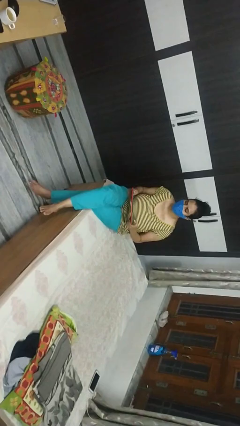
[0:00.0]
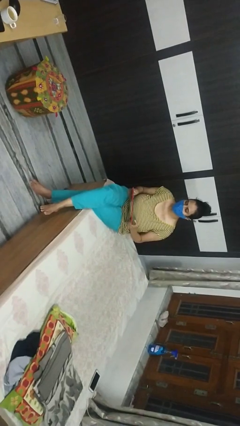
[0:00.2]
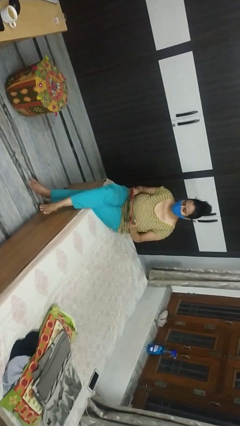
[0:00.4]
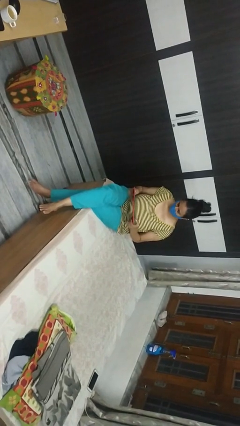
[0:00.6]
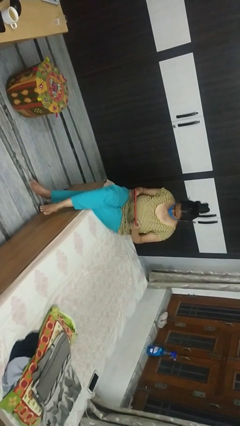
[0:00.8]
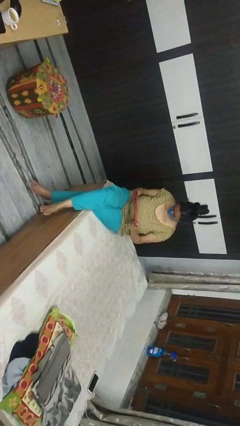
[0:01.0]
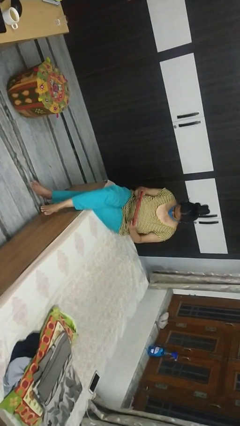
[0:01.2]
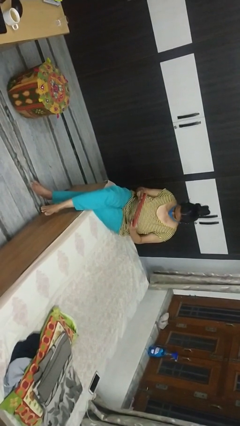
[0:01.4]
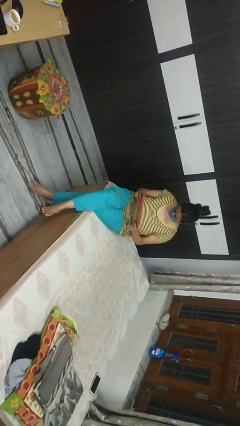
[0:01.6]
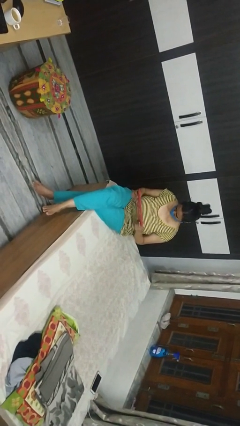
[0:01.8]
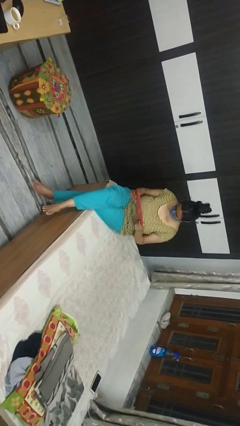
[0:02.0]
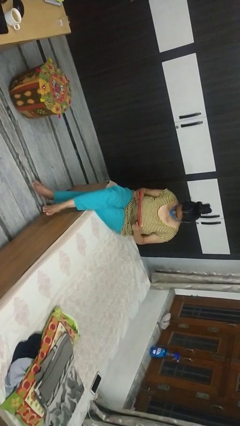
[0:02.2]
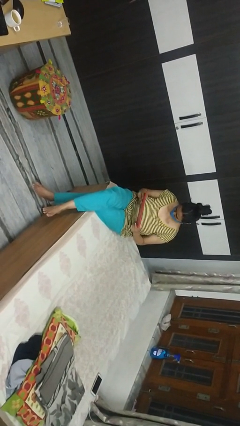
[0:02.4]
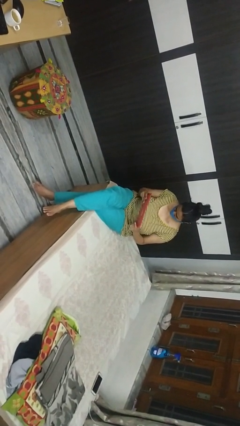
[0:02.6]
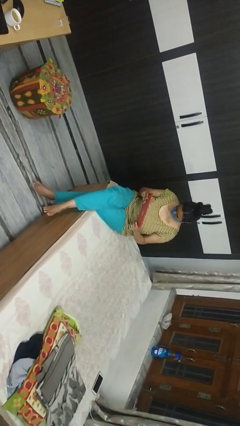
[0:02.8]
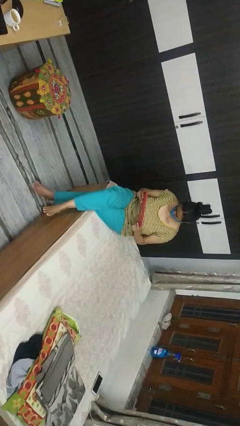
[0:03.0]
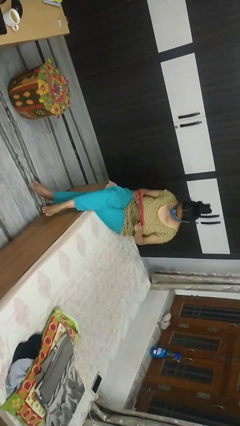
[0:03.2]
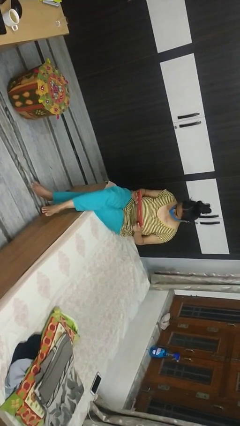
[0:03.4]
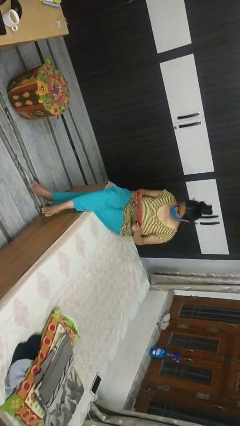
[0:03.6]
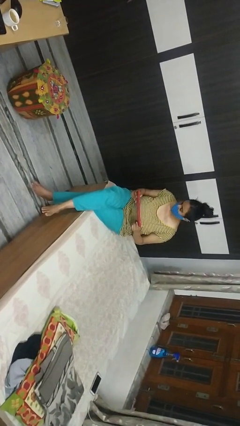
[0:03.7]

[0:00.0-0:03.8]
person interacts with handheld game

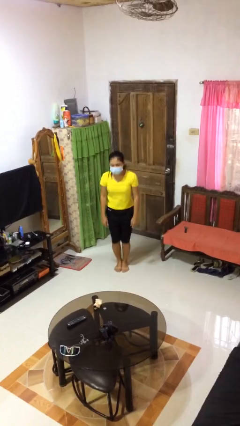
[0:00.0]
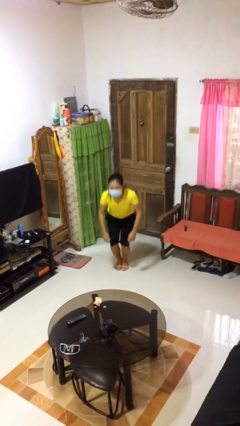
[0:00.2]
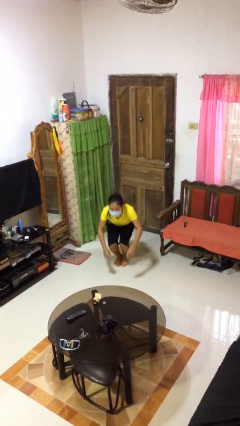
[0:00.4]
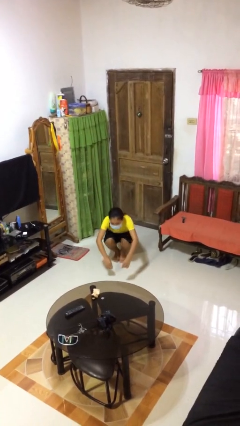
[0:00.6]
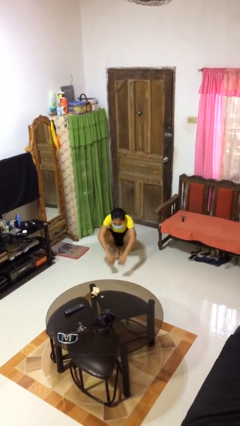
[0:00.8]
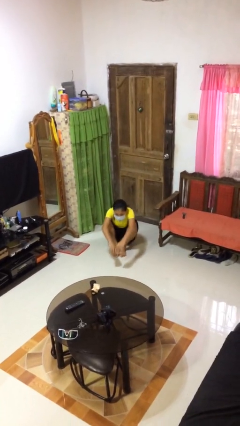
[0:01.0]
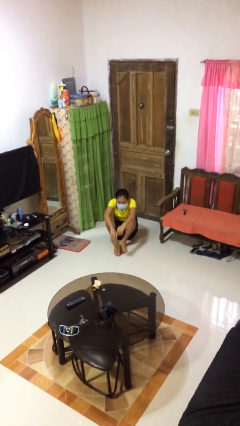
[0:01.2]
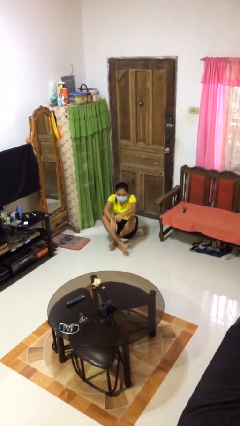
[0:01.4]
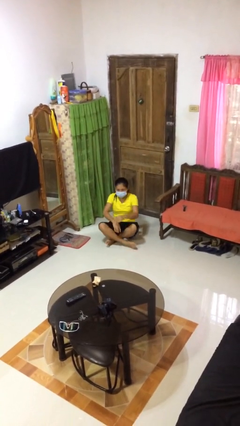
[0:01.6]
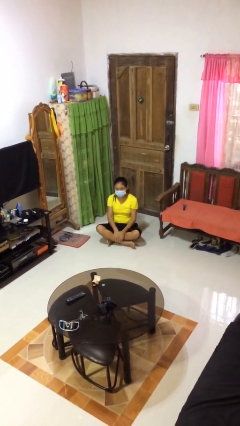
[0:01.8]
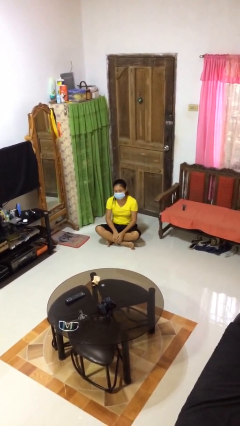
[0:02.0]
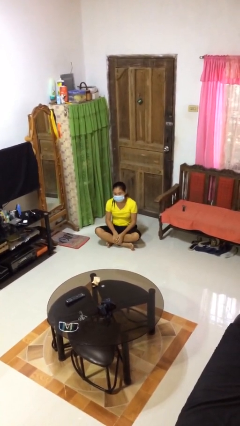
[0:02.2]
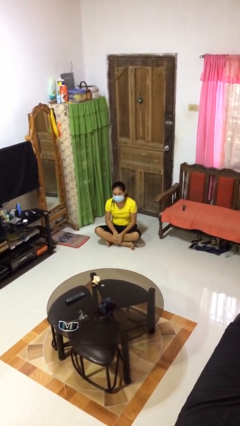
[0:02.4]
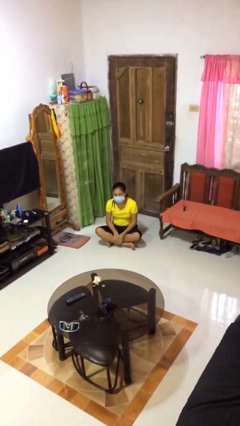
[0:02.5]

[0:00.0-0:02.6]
person sits crisscross

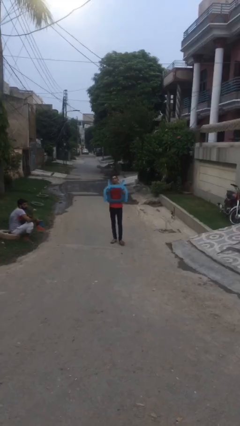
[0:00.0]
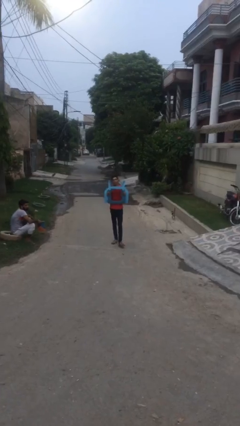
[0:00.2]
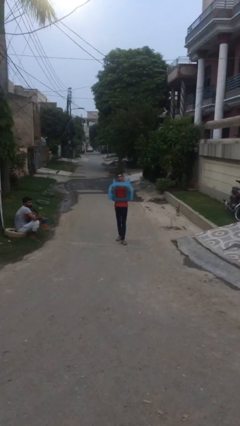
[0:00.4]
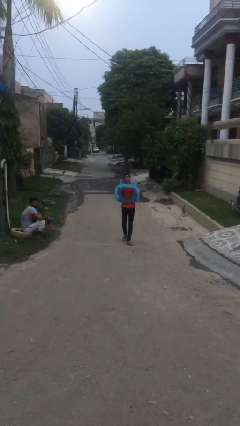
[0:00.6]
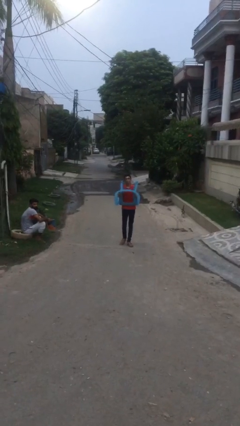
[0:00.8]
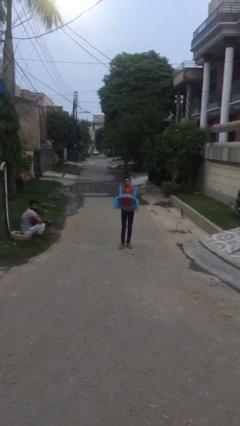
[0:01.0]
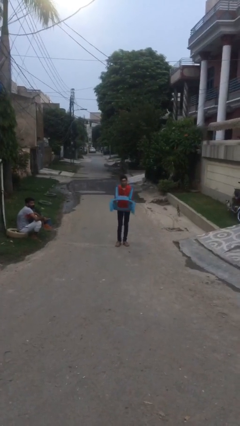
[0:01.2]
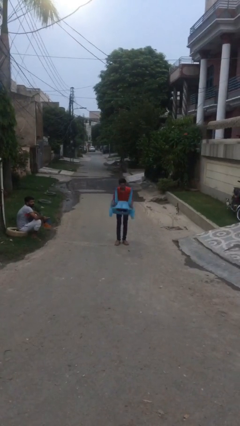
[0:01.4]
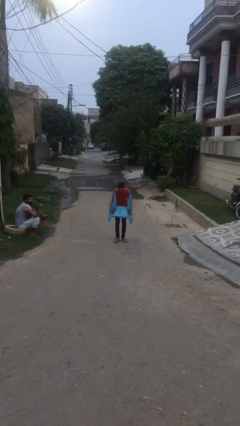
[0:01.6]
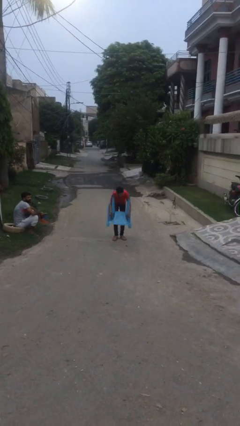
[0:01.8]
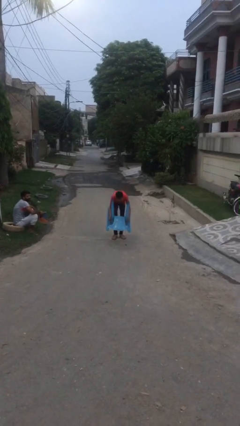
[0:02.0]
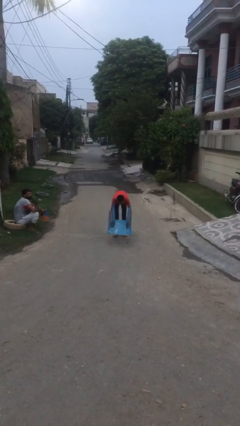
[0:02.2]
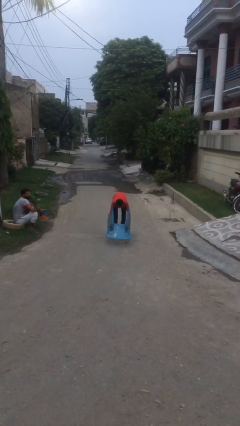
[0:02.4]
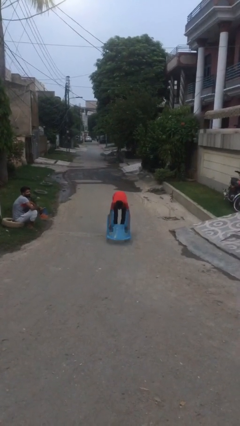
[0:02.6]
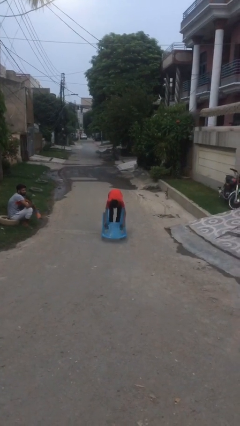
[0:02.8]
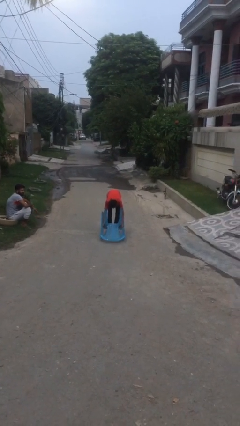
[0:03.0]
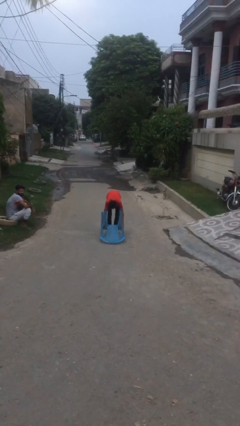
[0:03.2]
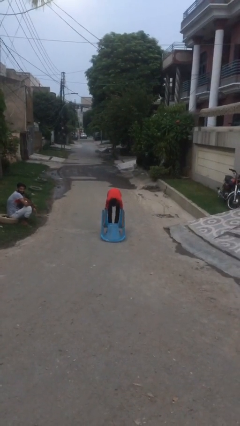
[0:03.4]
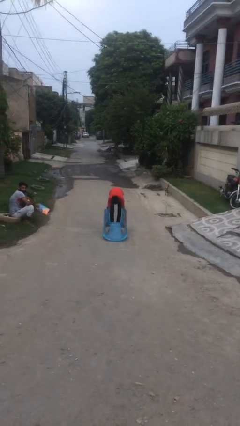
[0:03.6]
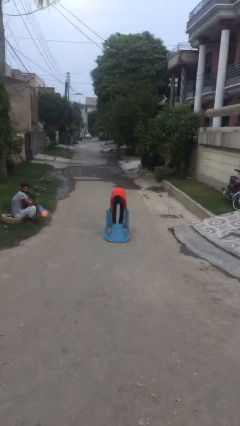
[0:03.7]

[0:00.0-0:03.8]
person puts down object on floor

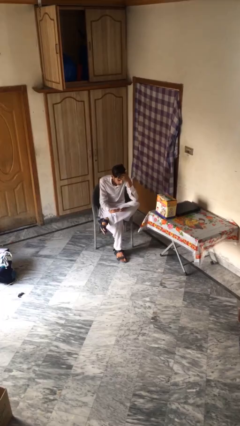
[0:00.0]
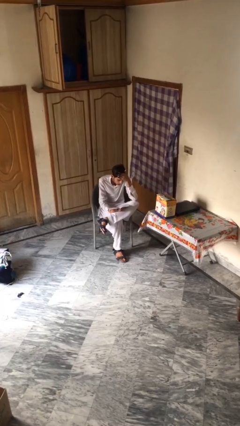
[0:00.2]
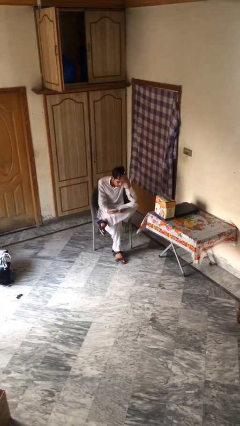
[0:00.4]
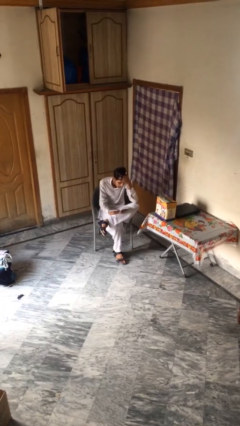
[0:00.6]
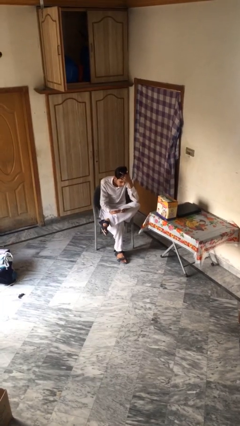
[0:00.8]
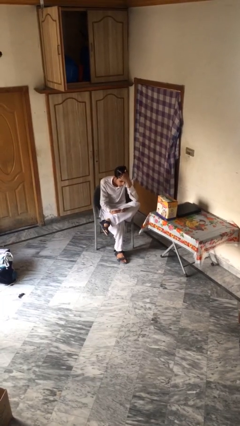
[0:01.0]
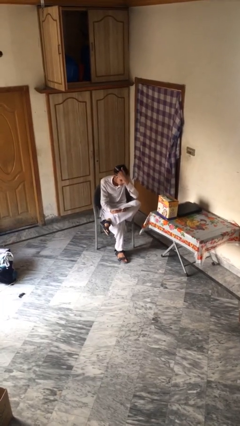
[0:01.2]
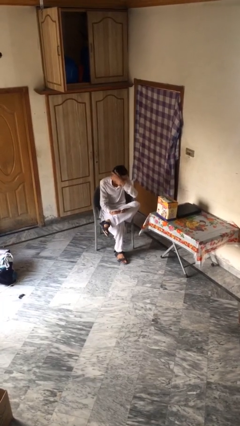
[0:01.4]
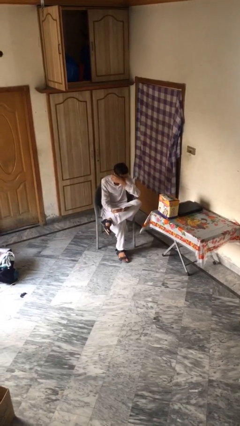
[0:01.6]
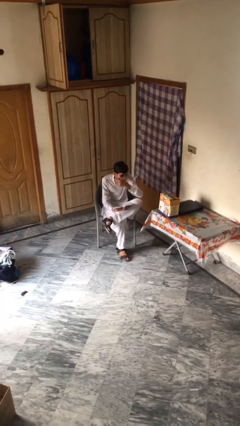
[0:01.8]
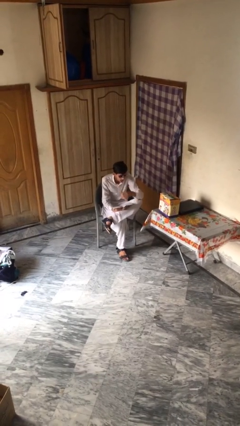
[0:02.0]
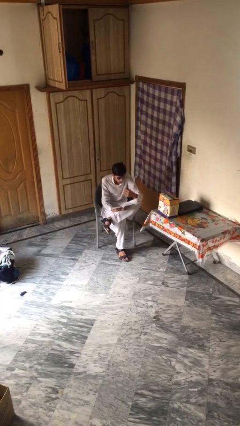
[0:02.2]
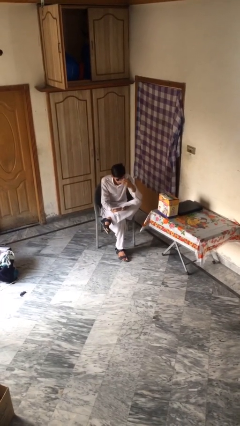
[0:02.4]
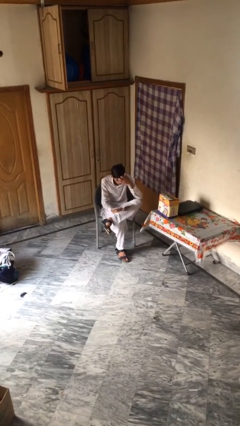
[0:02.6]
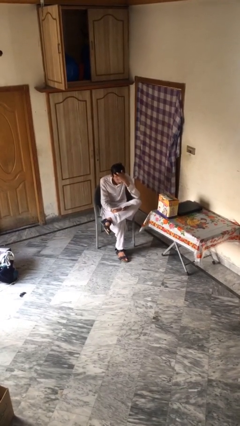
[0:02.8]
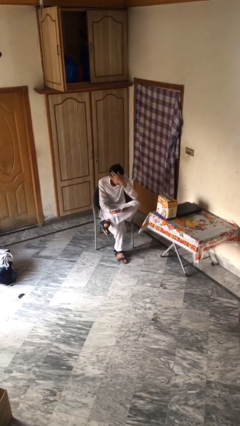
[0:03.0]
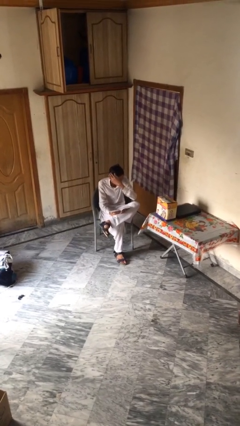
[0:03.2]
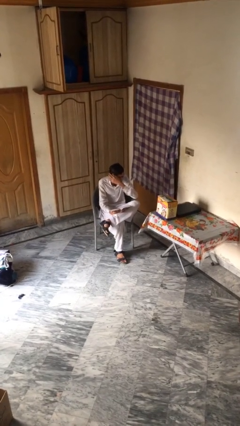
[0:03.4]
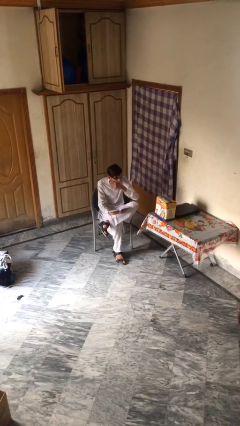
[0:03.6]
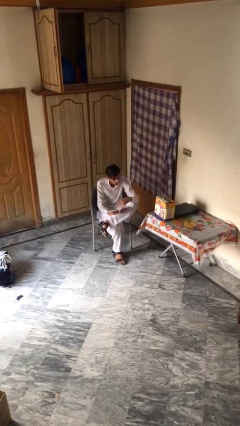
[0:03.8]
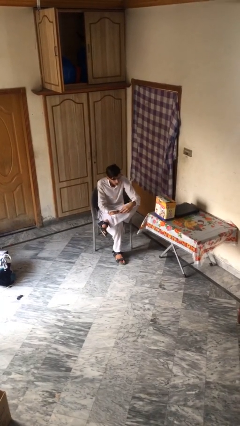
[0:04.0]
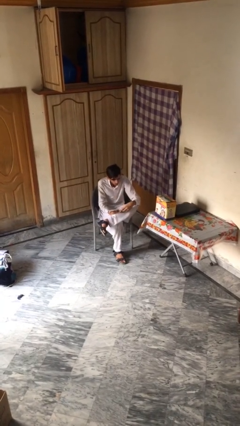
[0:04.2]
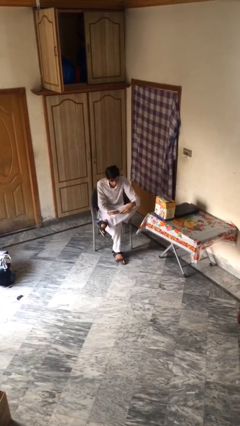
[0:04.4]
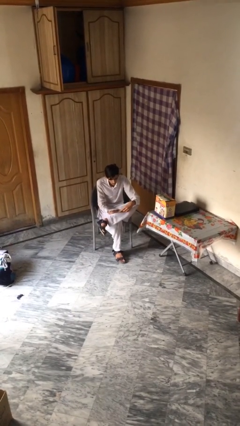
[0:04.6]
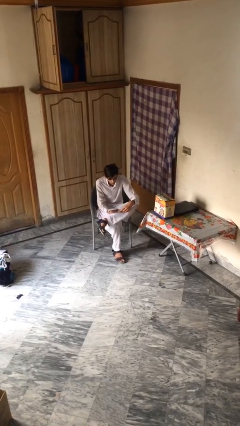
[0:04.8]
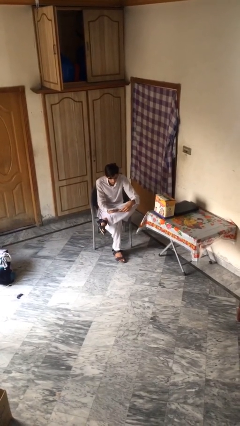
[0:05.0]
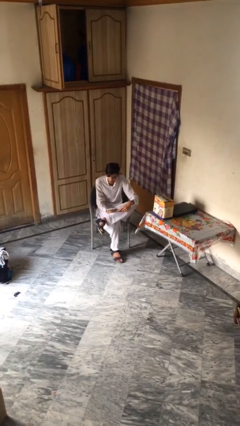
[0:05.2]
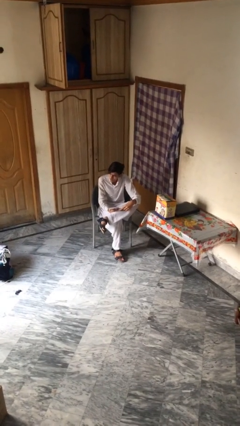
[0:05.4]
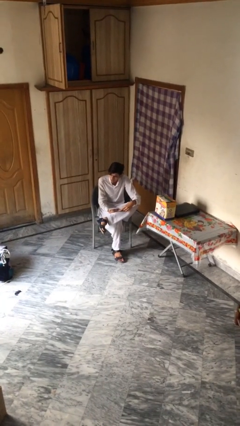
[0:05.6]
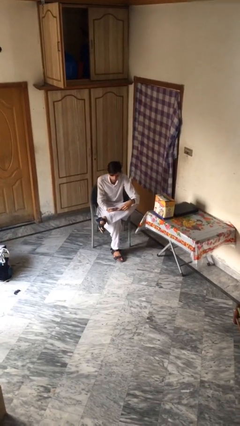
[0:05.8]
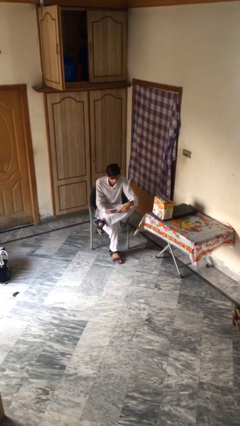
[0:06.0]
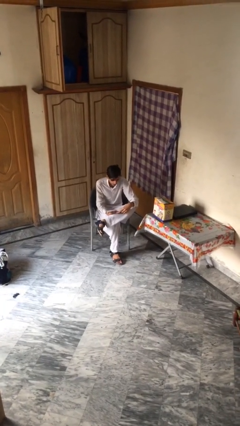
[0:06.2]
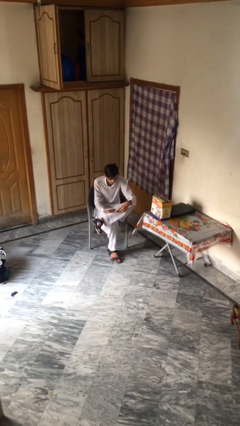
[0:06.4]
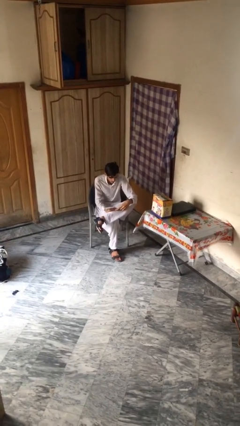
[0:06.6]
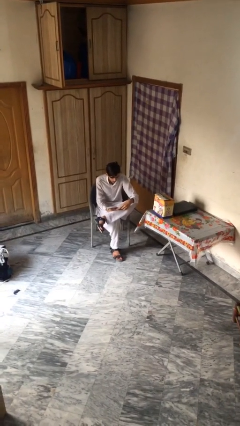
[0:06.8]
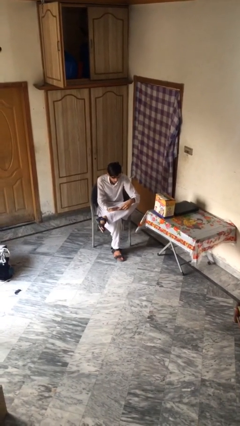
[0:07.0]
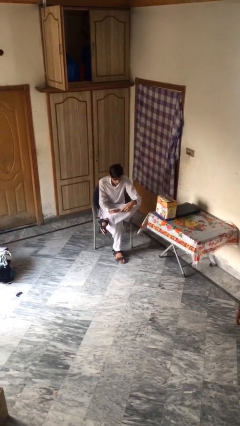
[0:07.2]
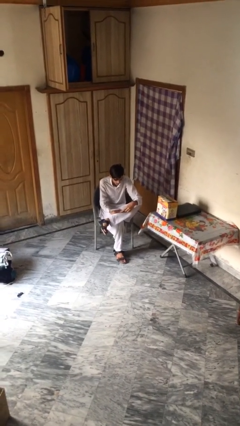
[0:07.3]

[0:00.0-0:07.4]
person reads document
